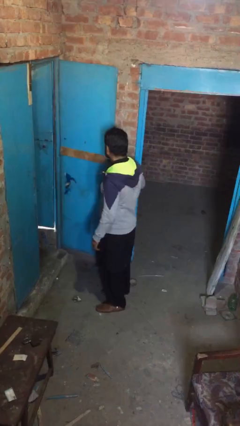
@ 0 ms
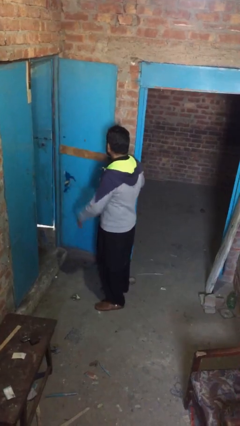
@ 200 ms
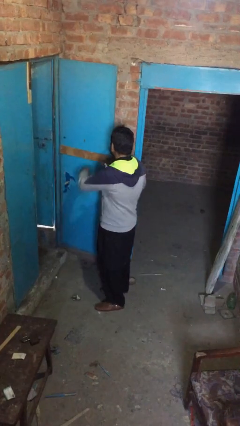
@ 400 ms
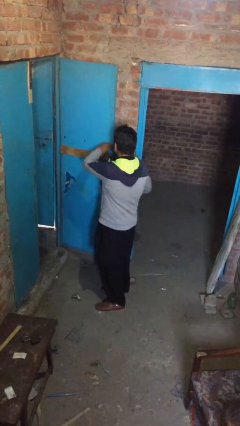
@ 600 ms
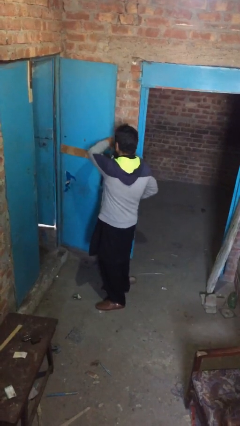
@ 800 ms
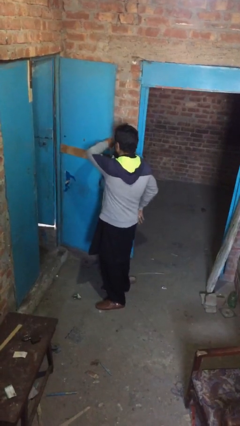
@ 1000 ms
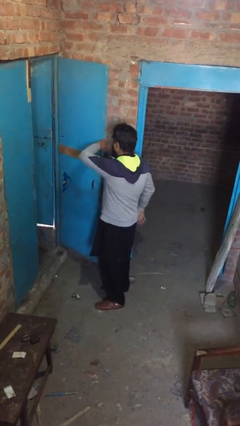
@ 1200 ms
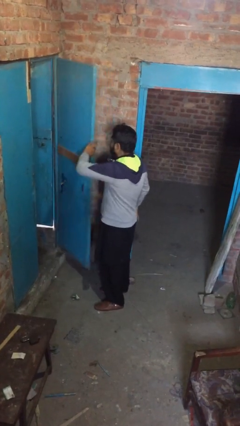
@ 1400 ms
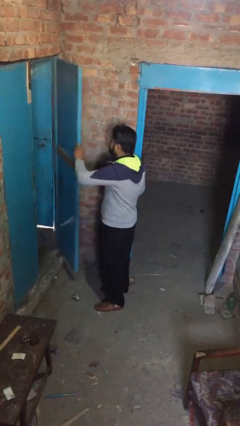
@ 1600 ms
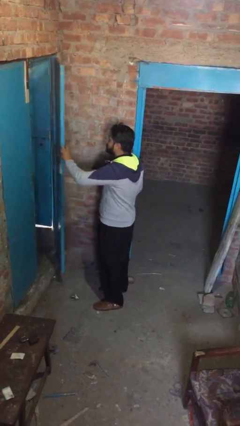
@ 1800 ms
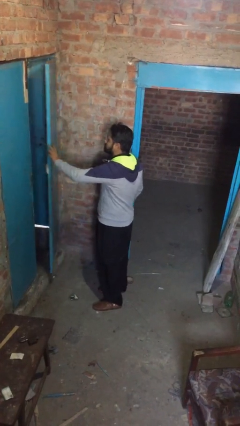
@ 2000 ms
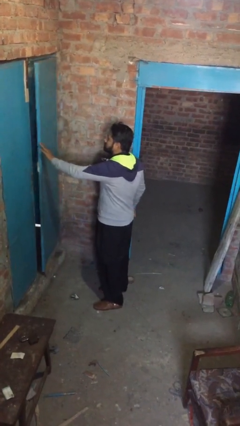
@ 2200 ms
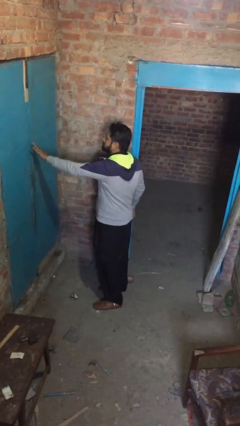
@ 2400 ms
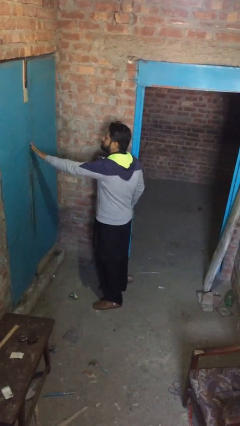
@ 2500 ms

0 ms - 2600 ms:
person closes facility door

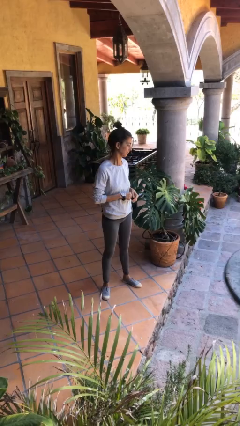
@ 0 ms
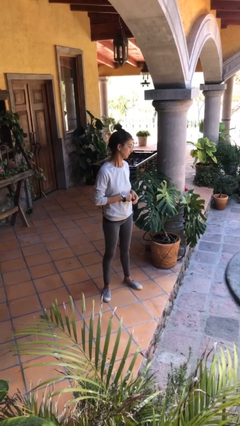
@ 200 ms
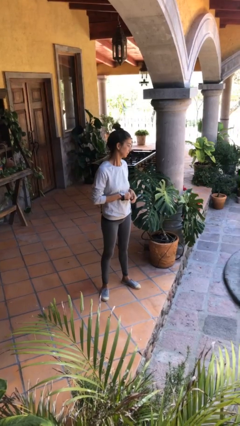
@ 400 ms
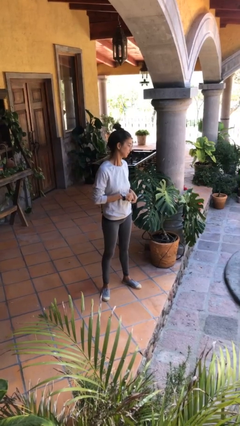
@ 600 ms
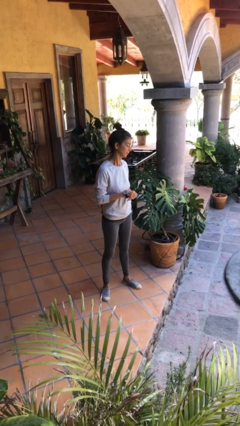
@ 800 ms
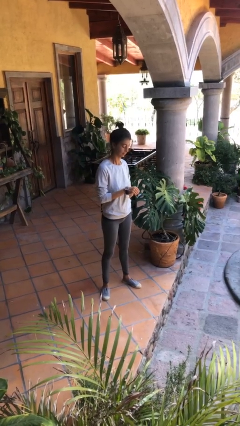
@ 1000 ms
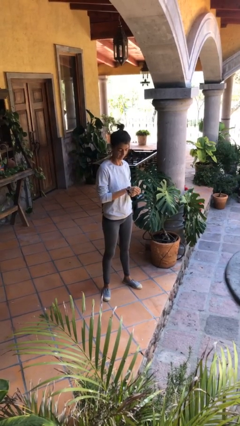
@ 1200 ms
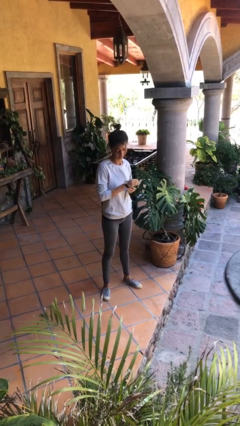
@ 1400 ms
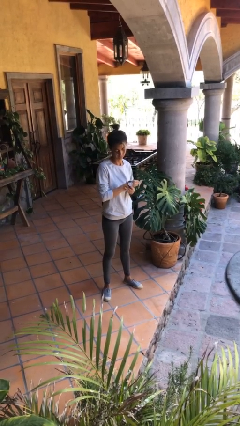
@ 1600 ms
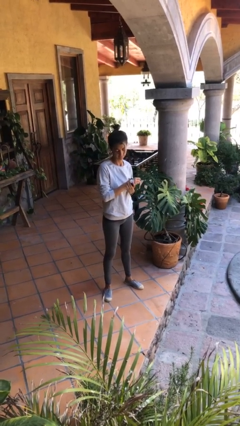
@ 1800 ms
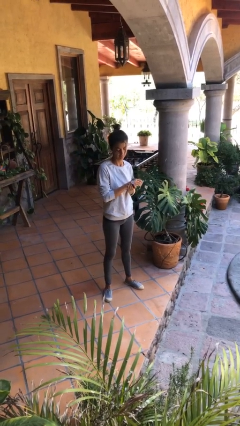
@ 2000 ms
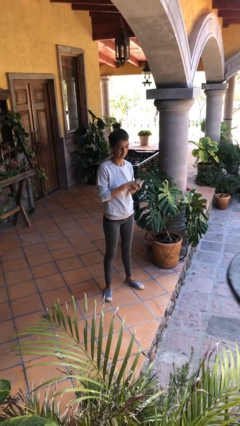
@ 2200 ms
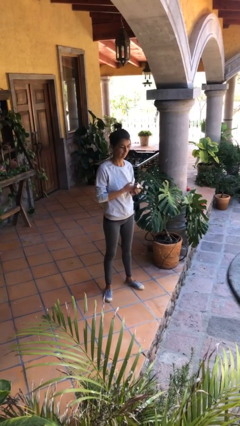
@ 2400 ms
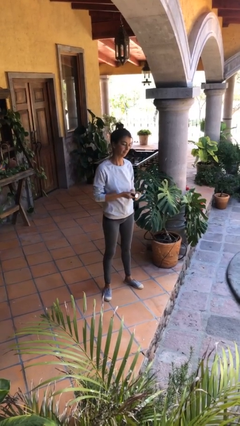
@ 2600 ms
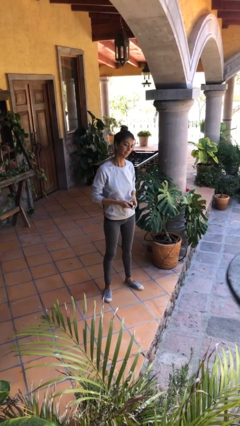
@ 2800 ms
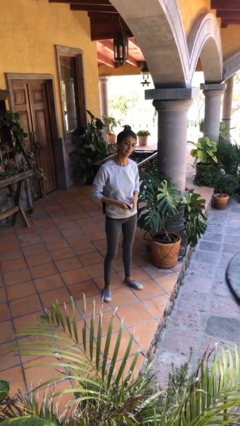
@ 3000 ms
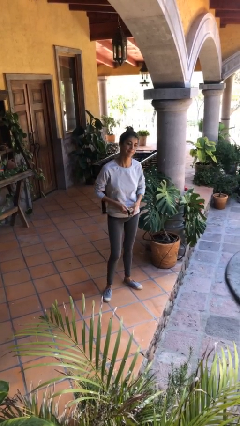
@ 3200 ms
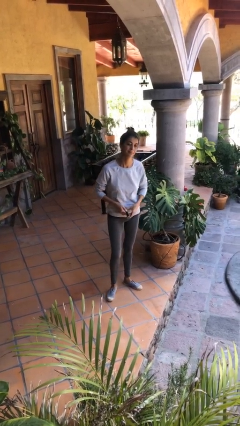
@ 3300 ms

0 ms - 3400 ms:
person takes off wristwatch

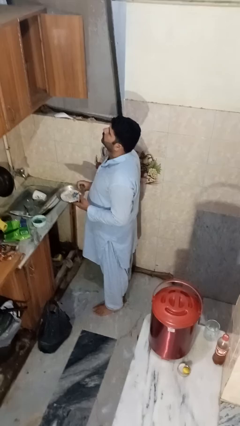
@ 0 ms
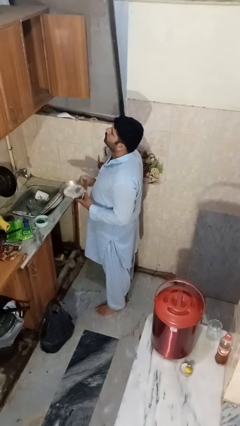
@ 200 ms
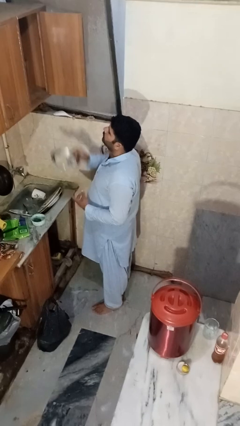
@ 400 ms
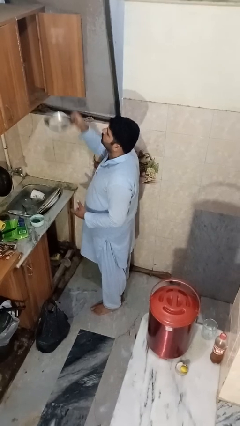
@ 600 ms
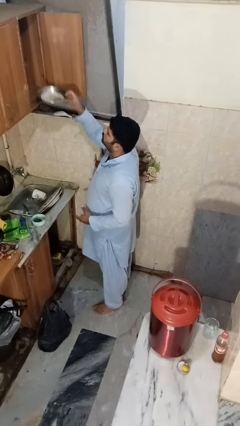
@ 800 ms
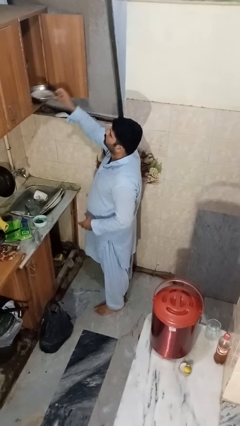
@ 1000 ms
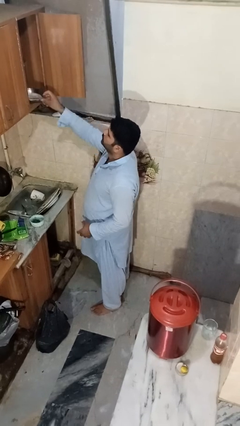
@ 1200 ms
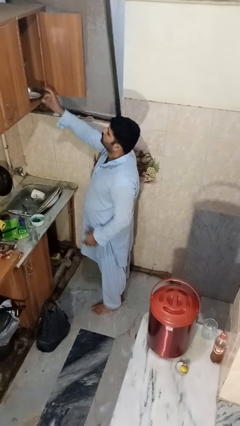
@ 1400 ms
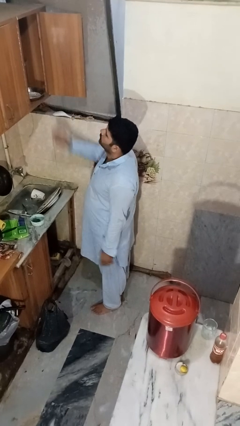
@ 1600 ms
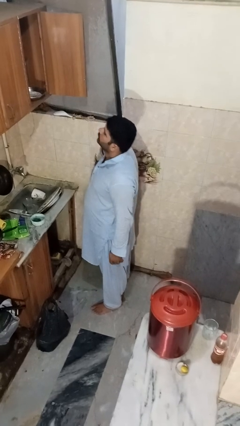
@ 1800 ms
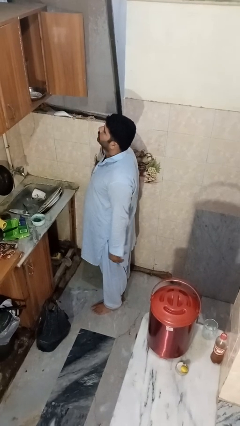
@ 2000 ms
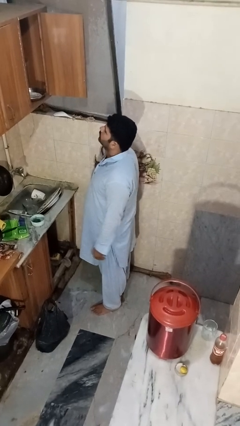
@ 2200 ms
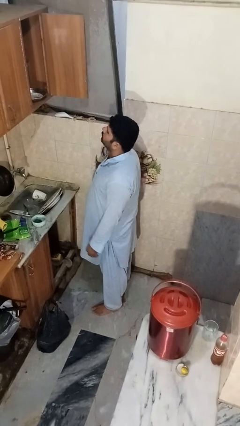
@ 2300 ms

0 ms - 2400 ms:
person puts object in cabinet

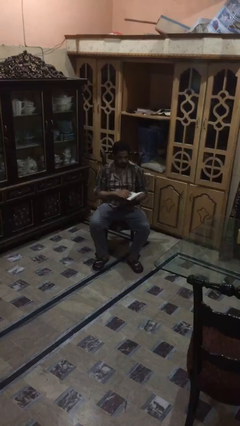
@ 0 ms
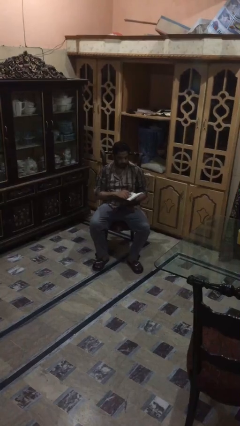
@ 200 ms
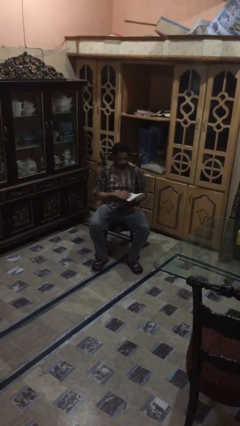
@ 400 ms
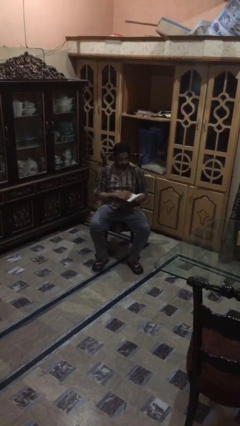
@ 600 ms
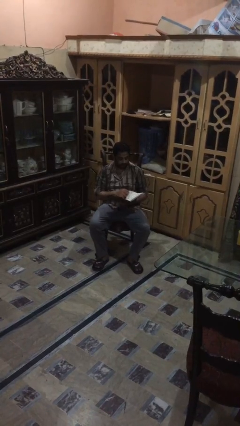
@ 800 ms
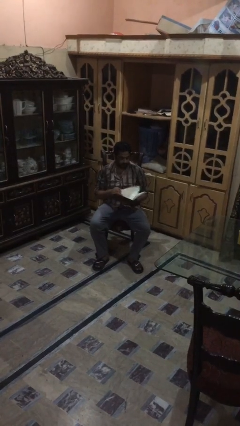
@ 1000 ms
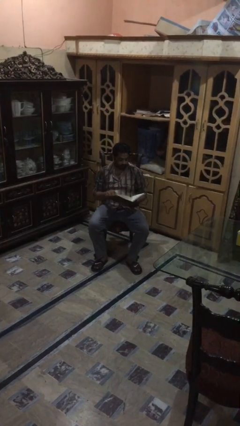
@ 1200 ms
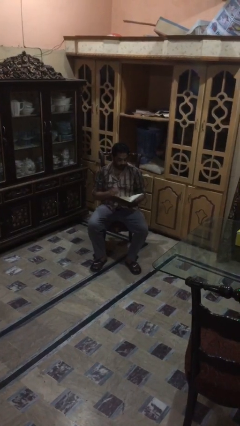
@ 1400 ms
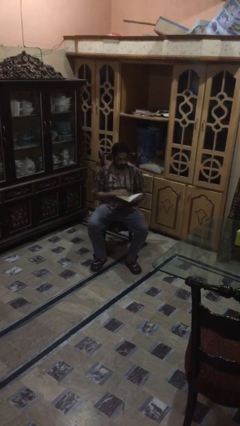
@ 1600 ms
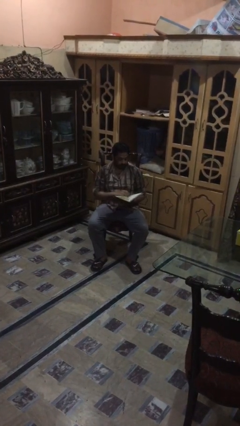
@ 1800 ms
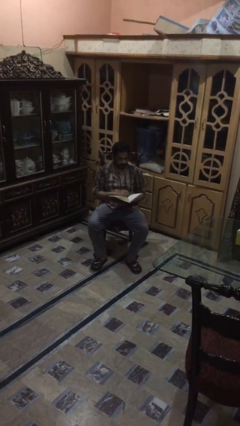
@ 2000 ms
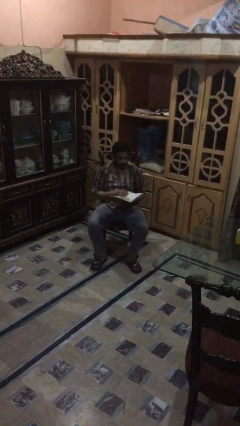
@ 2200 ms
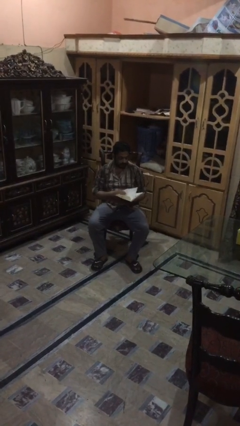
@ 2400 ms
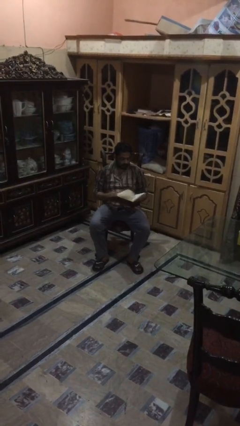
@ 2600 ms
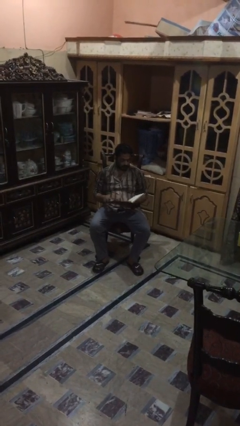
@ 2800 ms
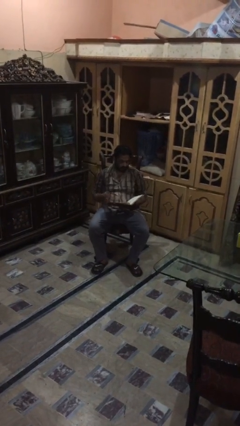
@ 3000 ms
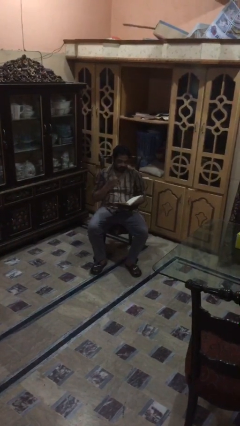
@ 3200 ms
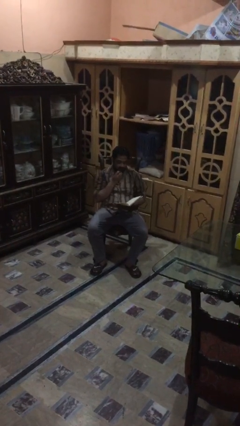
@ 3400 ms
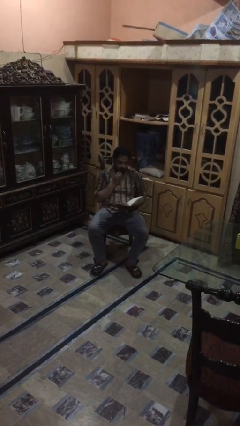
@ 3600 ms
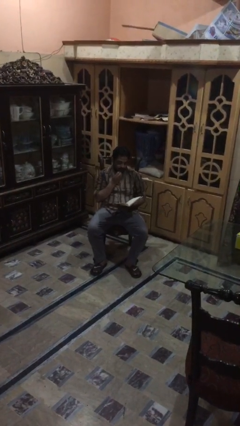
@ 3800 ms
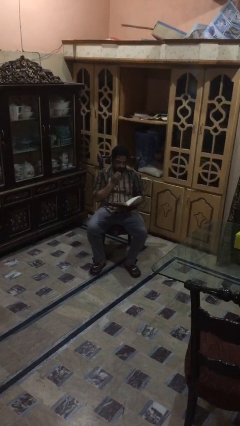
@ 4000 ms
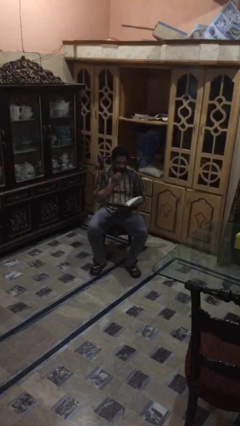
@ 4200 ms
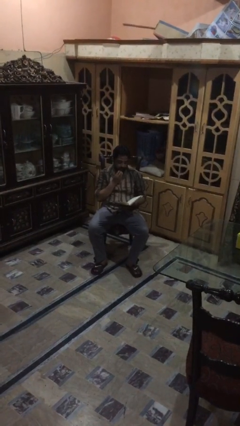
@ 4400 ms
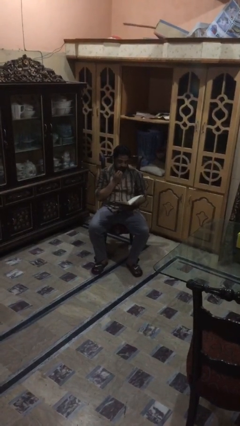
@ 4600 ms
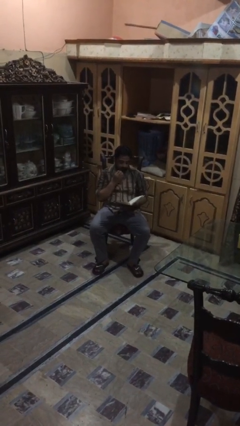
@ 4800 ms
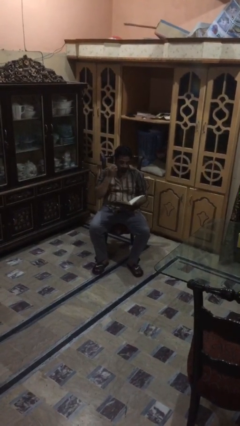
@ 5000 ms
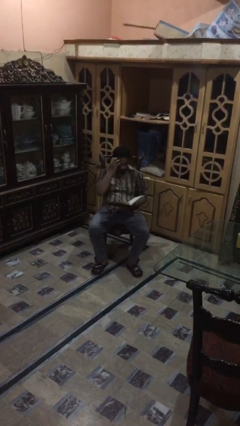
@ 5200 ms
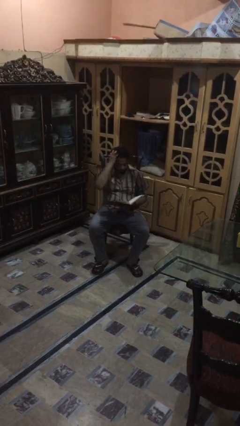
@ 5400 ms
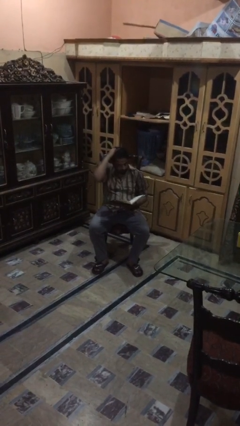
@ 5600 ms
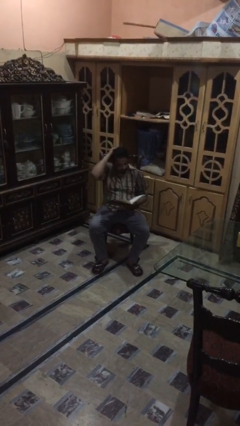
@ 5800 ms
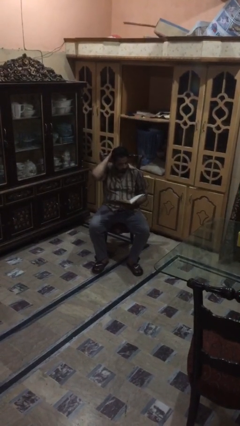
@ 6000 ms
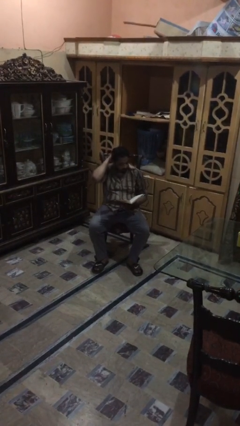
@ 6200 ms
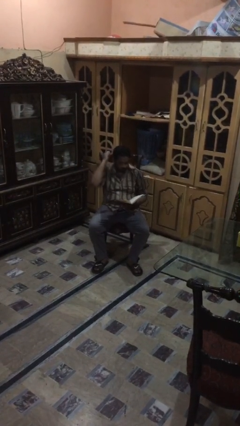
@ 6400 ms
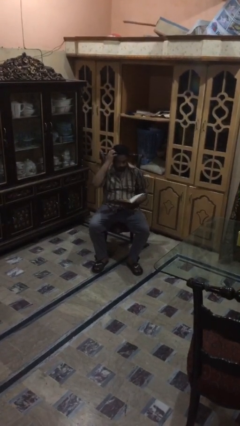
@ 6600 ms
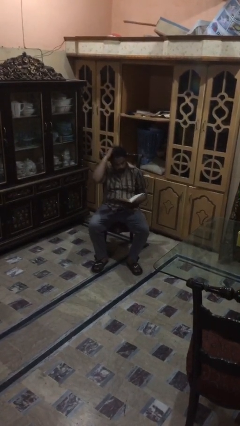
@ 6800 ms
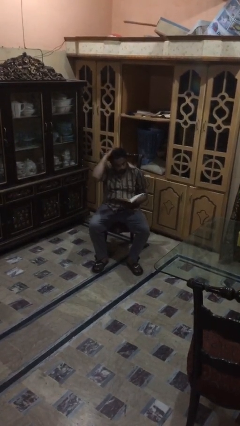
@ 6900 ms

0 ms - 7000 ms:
person reads document

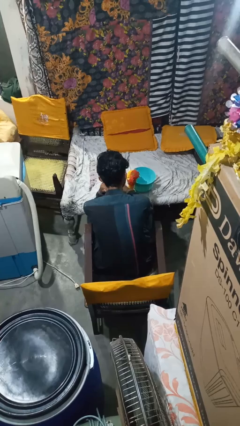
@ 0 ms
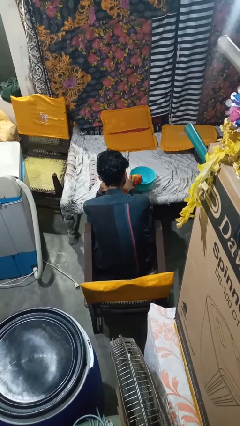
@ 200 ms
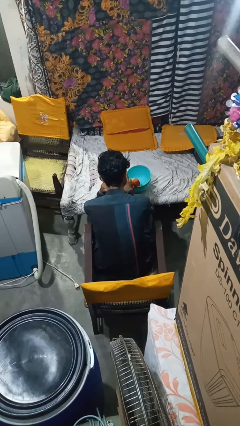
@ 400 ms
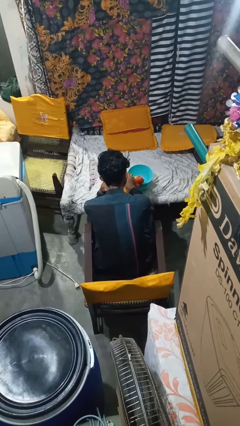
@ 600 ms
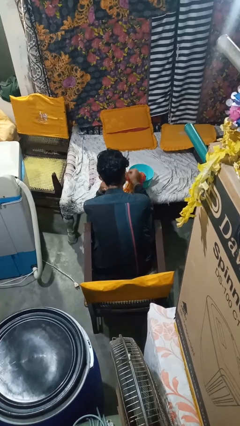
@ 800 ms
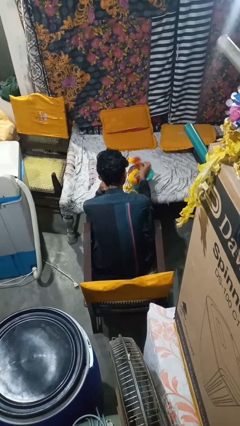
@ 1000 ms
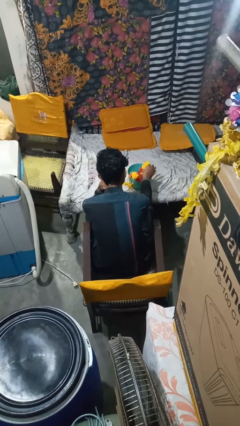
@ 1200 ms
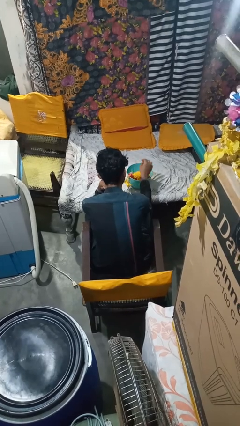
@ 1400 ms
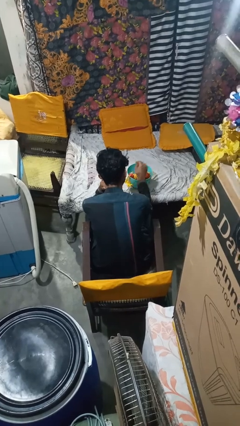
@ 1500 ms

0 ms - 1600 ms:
person pours into bowl

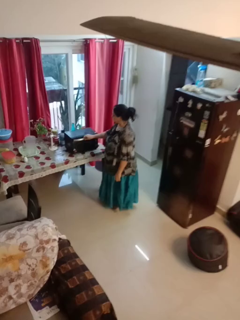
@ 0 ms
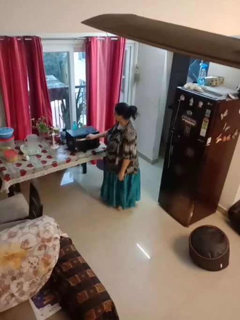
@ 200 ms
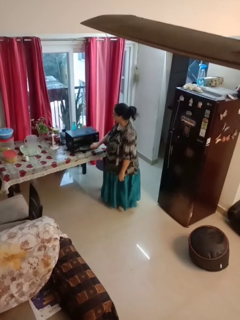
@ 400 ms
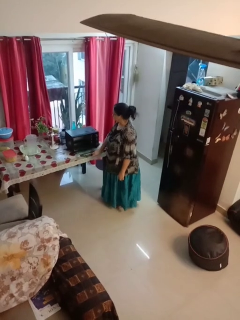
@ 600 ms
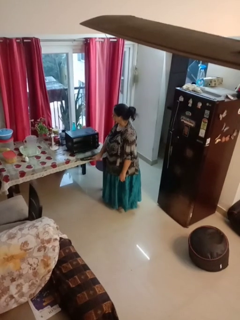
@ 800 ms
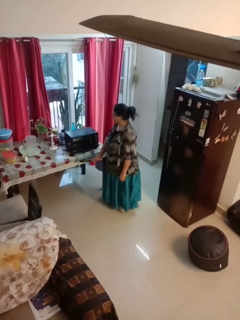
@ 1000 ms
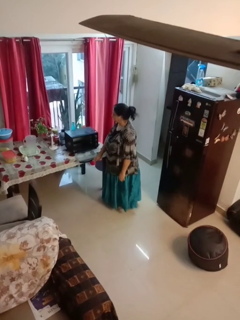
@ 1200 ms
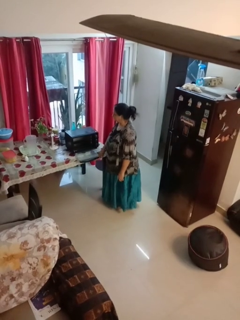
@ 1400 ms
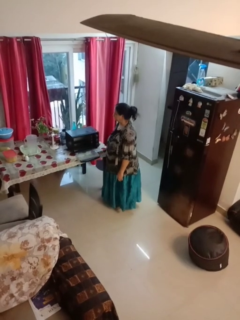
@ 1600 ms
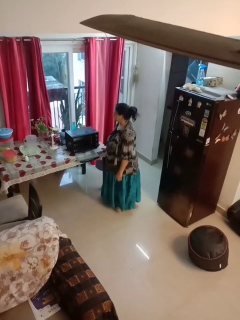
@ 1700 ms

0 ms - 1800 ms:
person opens microwave
